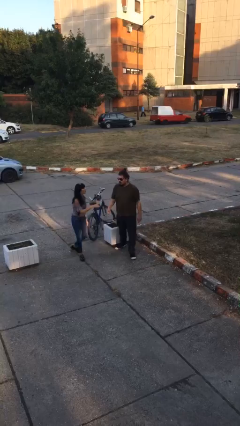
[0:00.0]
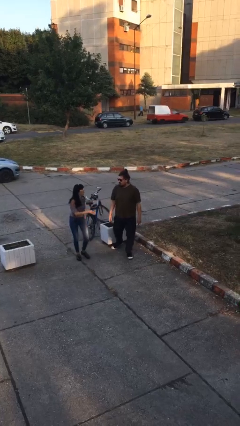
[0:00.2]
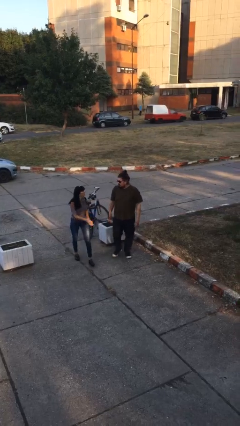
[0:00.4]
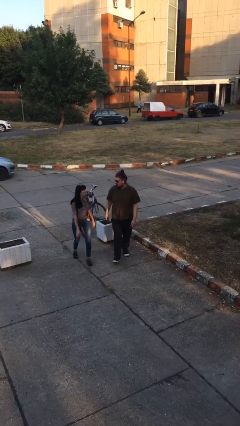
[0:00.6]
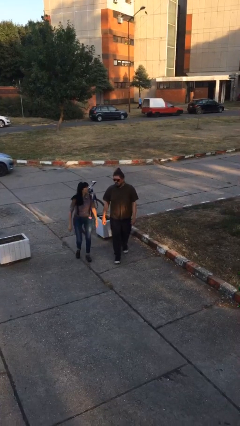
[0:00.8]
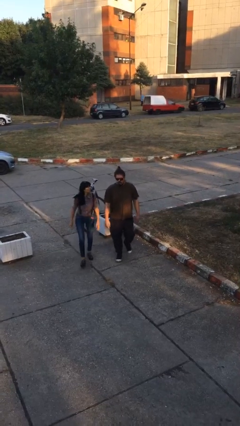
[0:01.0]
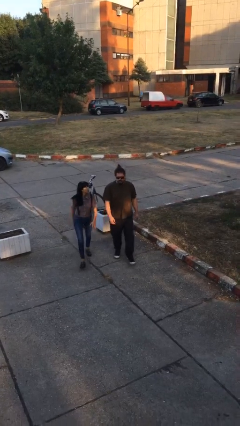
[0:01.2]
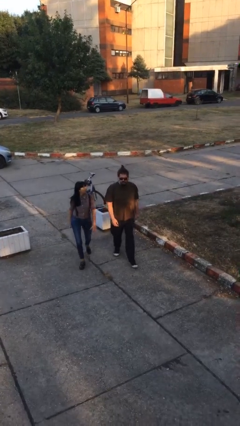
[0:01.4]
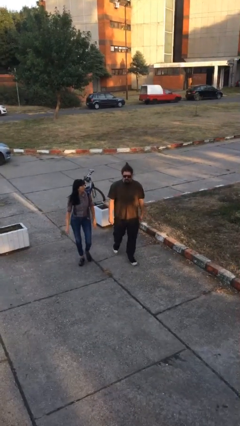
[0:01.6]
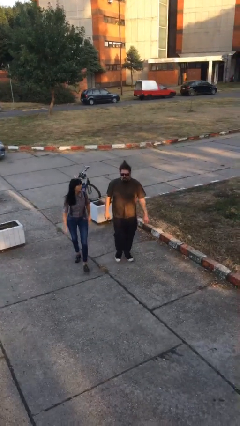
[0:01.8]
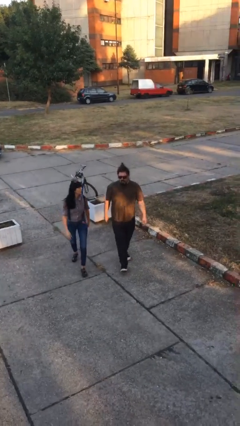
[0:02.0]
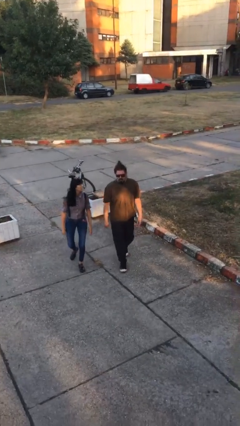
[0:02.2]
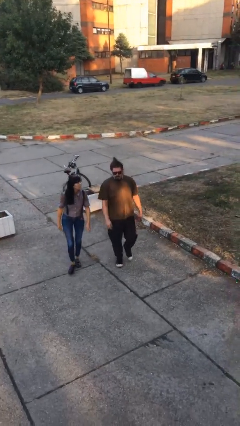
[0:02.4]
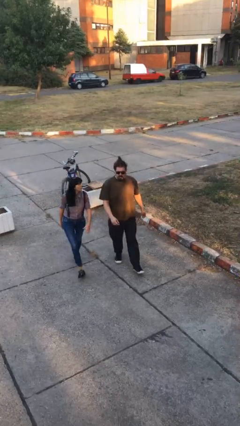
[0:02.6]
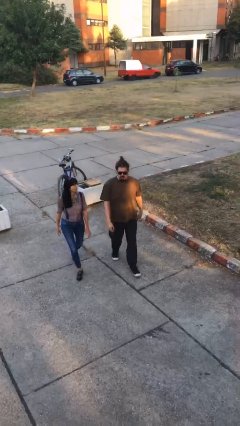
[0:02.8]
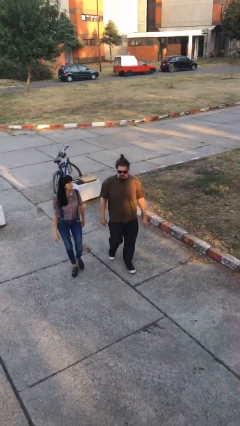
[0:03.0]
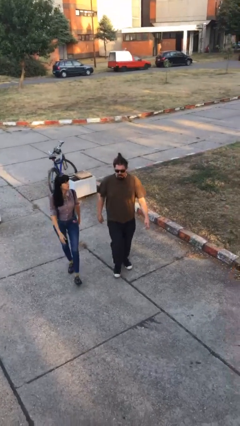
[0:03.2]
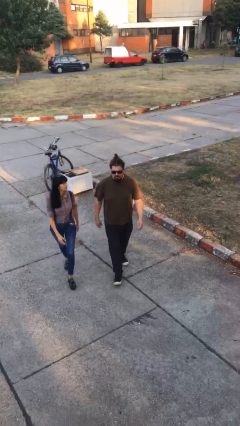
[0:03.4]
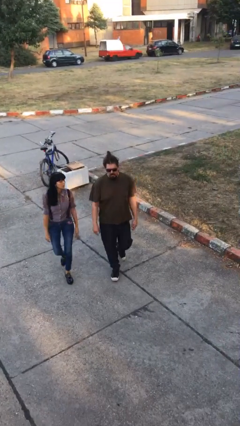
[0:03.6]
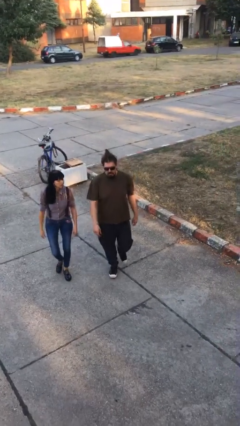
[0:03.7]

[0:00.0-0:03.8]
person talks to person

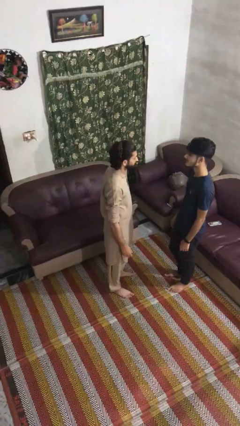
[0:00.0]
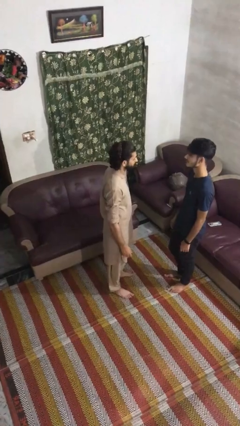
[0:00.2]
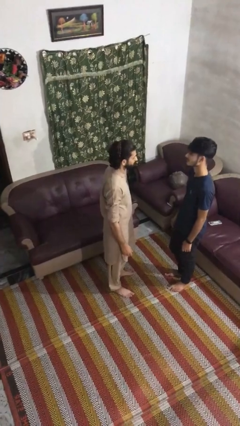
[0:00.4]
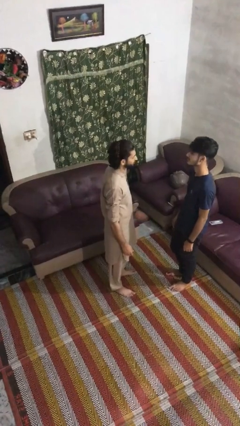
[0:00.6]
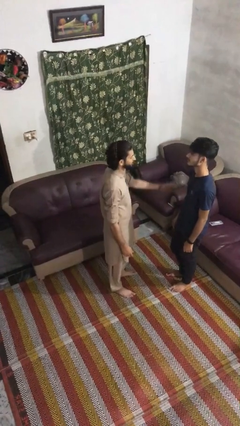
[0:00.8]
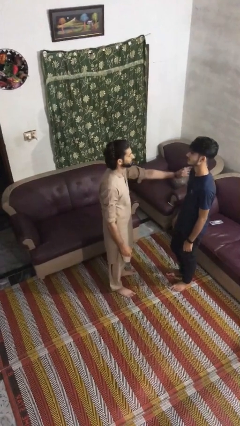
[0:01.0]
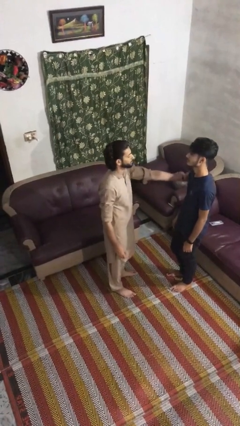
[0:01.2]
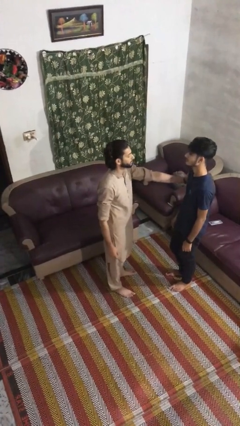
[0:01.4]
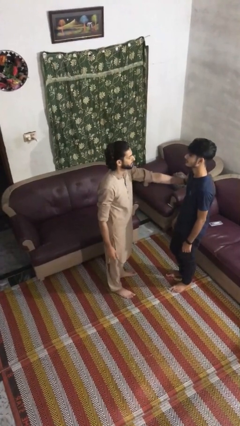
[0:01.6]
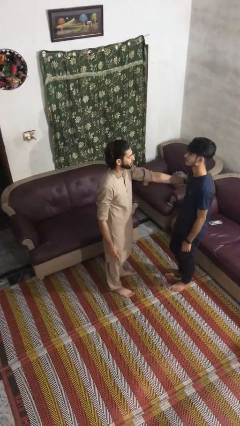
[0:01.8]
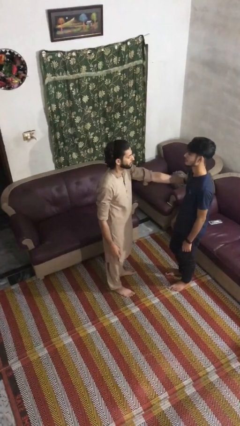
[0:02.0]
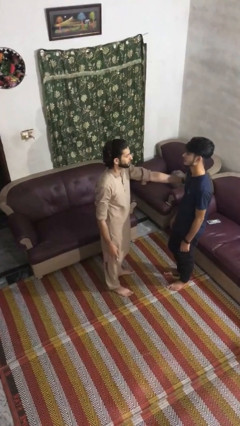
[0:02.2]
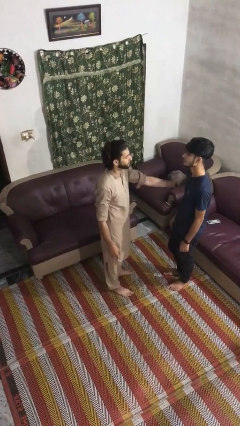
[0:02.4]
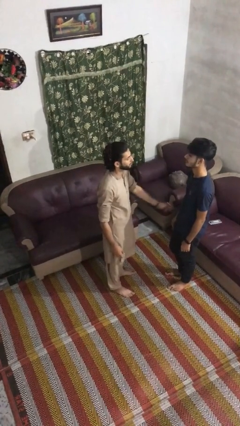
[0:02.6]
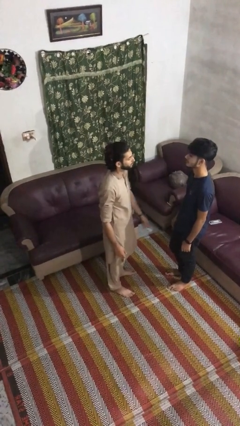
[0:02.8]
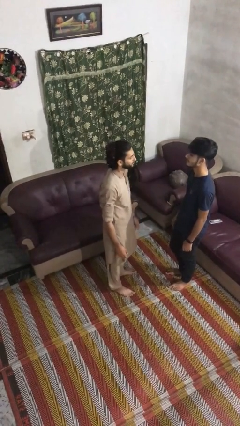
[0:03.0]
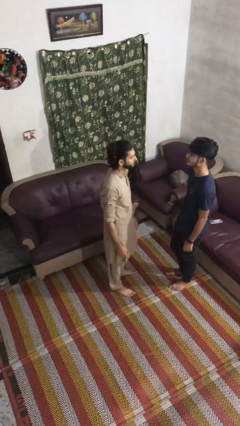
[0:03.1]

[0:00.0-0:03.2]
person grabs person by bicep

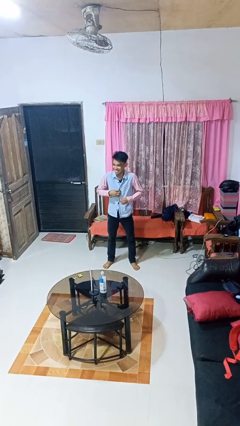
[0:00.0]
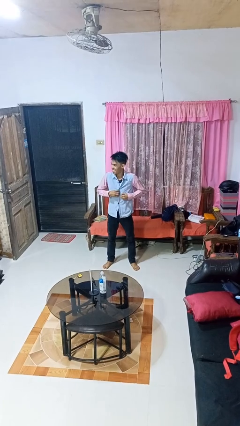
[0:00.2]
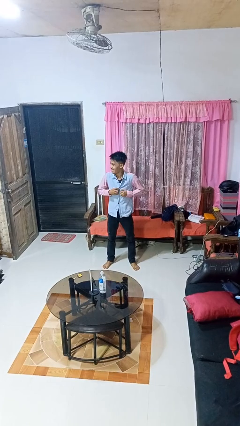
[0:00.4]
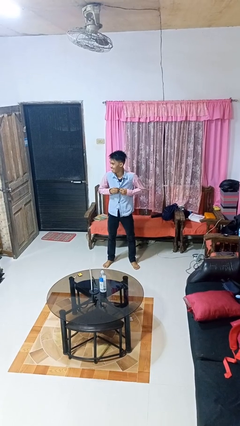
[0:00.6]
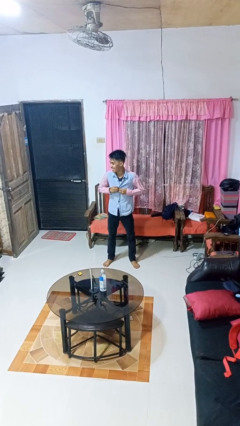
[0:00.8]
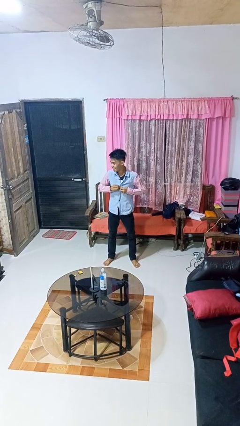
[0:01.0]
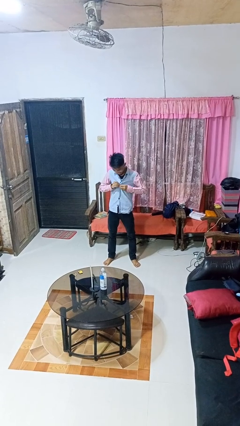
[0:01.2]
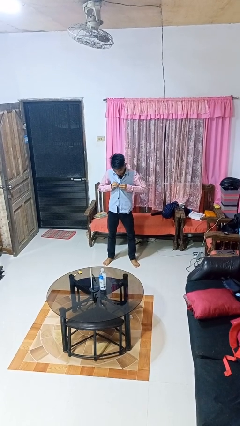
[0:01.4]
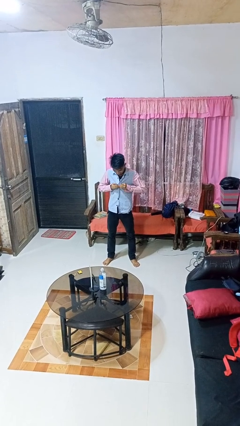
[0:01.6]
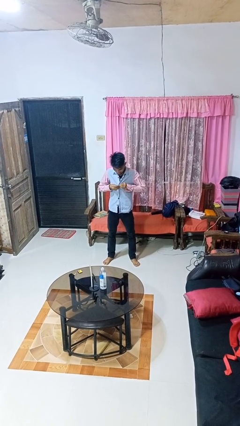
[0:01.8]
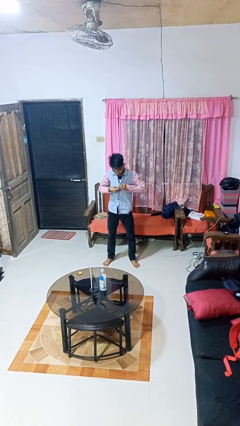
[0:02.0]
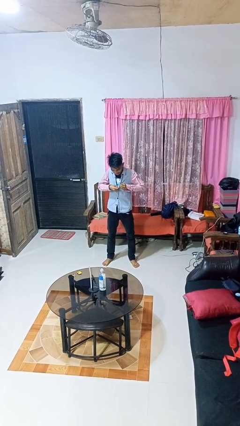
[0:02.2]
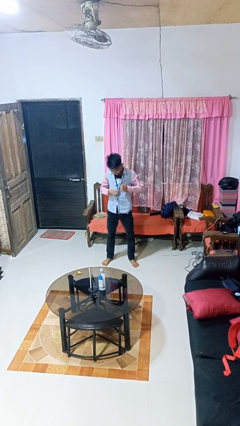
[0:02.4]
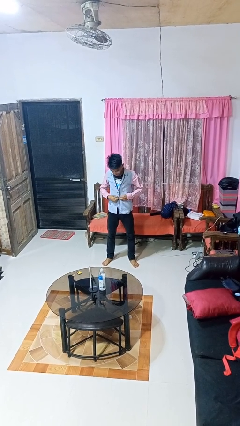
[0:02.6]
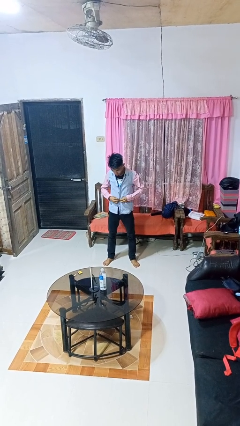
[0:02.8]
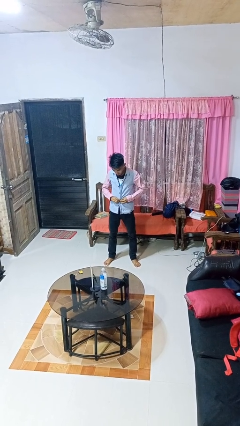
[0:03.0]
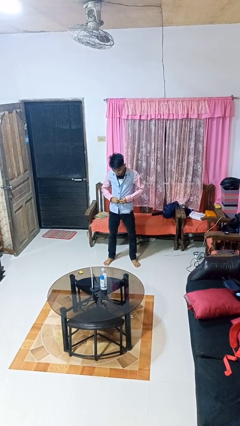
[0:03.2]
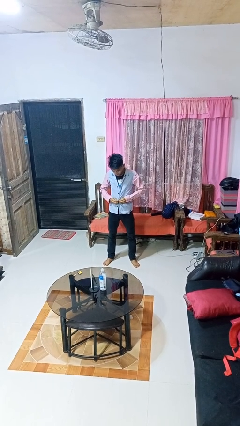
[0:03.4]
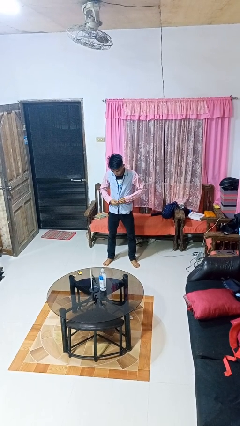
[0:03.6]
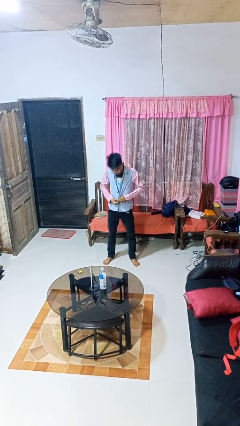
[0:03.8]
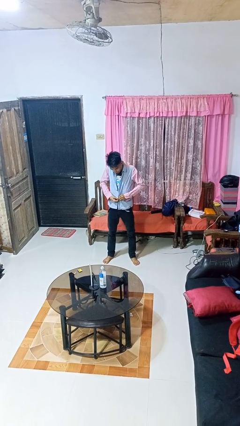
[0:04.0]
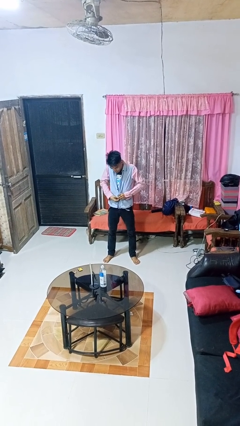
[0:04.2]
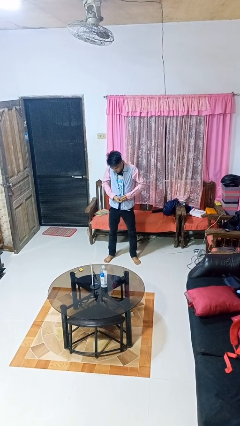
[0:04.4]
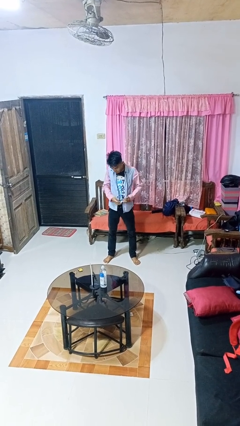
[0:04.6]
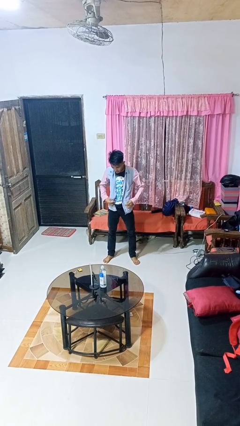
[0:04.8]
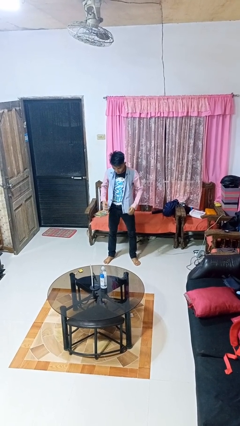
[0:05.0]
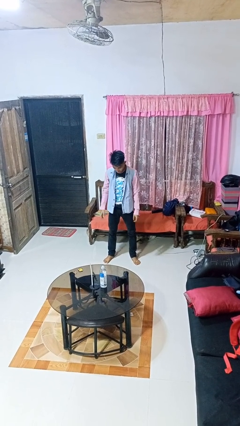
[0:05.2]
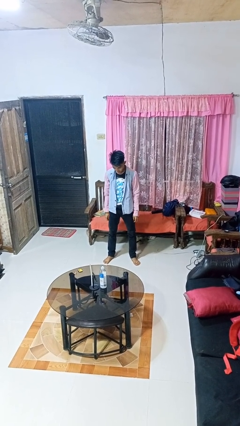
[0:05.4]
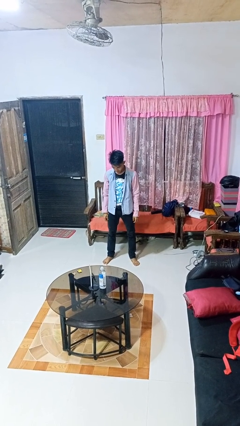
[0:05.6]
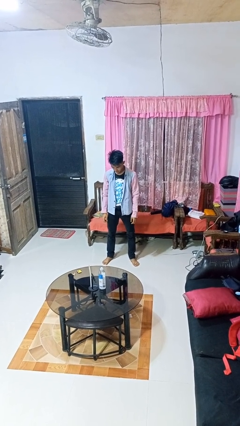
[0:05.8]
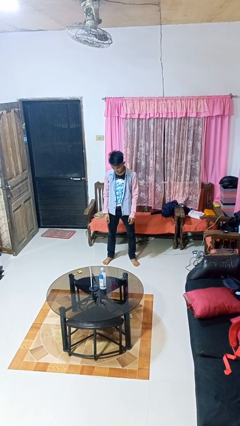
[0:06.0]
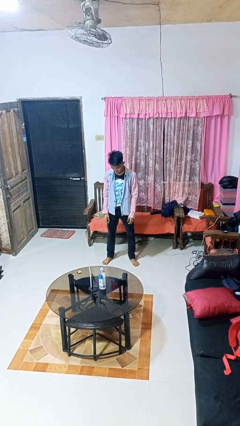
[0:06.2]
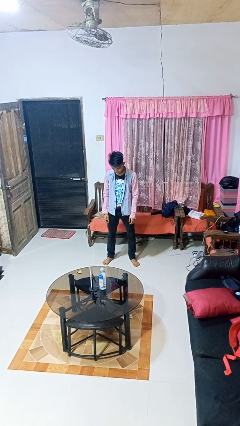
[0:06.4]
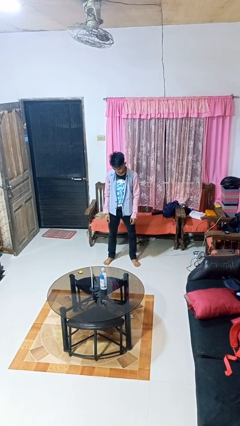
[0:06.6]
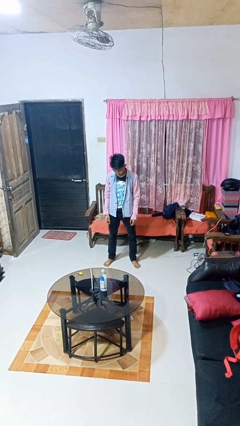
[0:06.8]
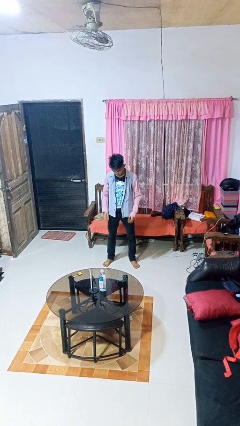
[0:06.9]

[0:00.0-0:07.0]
person unbuttons shirt

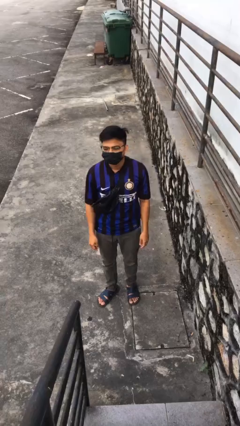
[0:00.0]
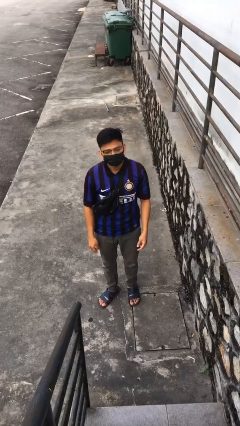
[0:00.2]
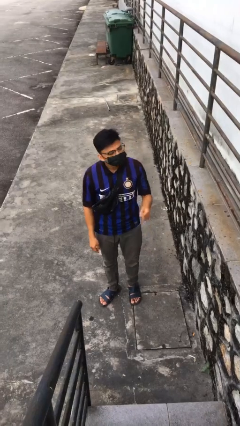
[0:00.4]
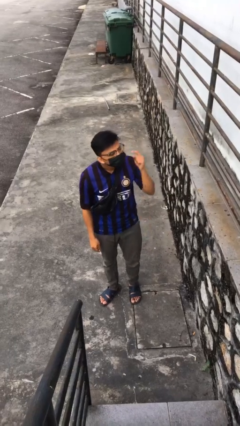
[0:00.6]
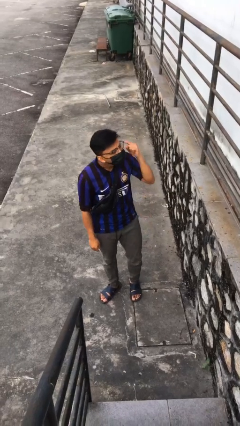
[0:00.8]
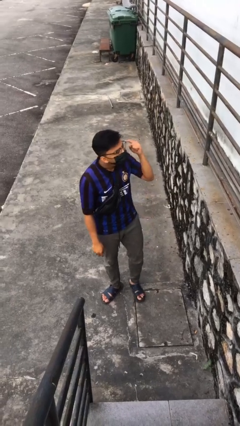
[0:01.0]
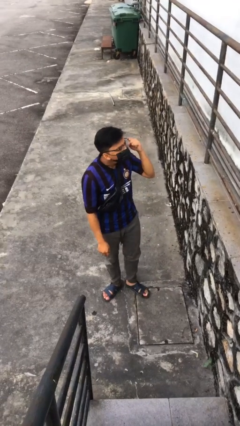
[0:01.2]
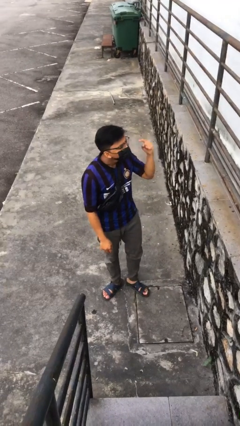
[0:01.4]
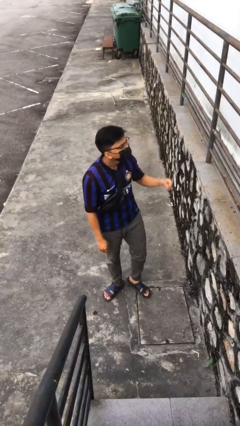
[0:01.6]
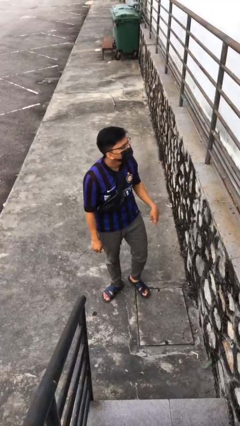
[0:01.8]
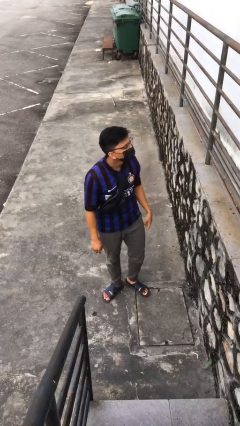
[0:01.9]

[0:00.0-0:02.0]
person gestures listen closely

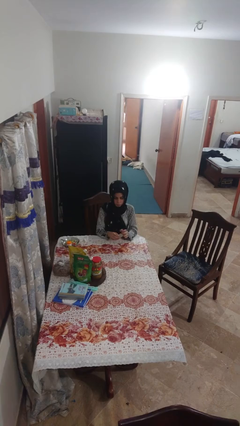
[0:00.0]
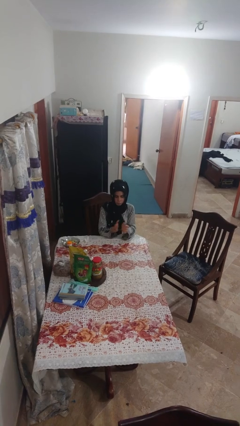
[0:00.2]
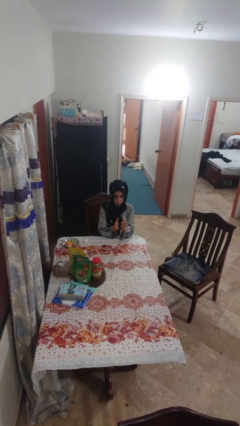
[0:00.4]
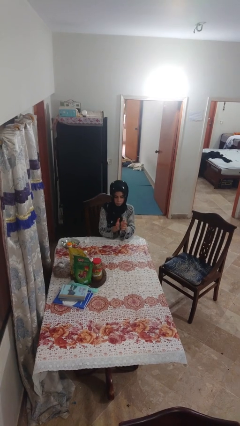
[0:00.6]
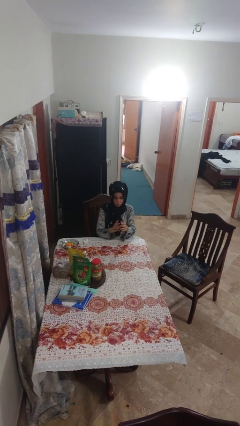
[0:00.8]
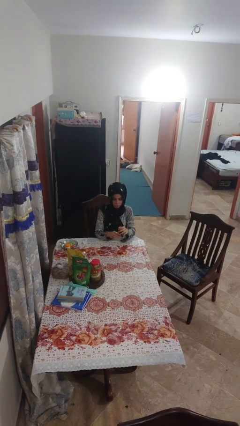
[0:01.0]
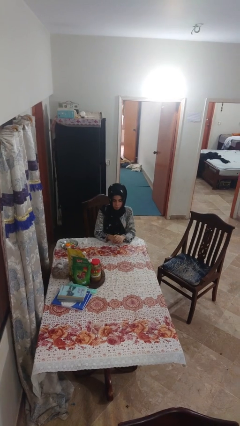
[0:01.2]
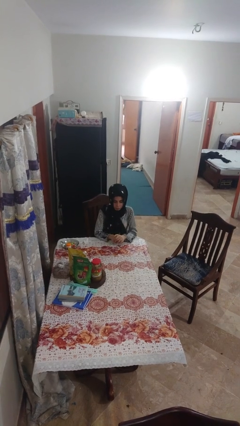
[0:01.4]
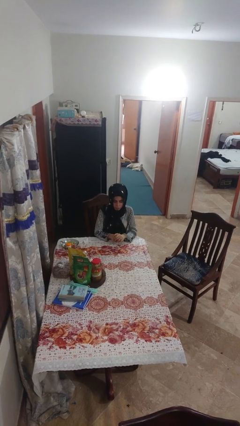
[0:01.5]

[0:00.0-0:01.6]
person claps hands
